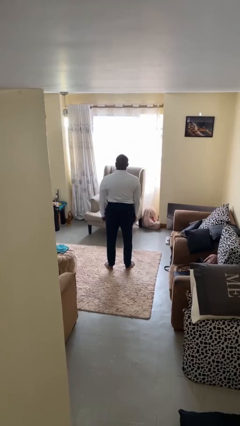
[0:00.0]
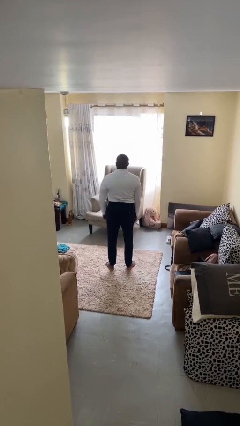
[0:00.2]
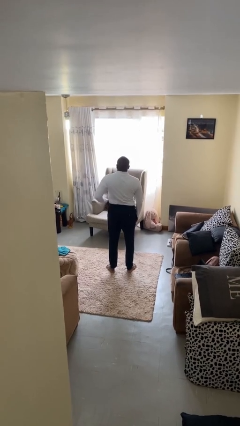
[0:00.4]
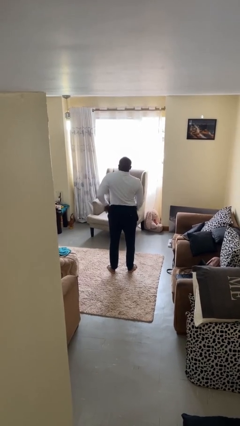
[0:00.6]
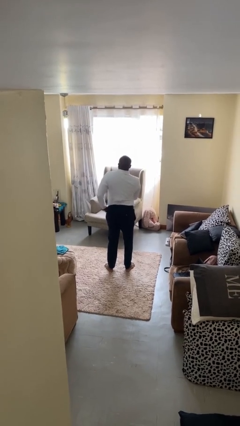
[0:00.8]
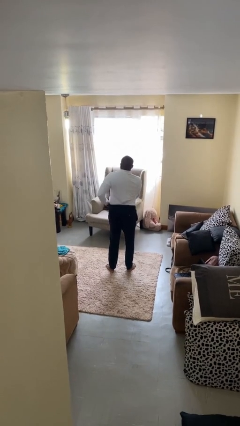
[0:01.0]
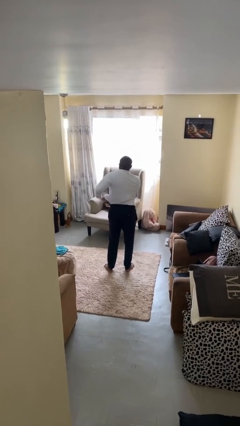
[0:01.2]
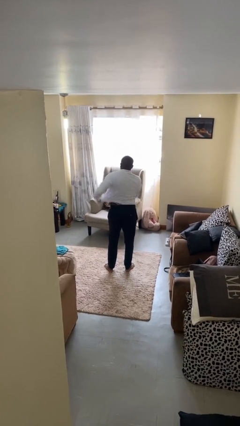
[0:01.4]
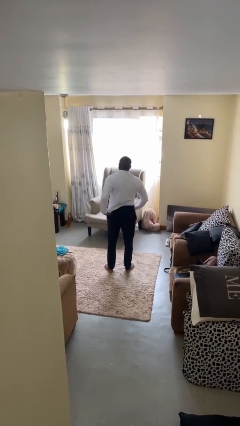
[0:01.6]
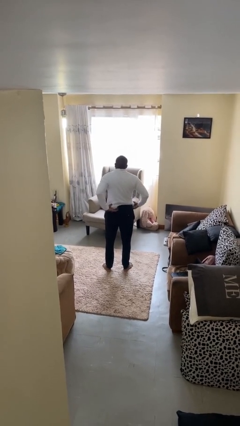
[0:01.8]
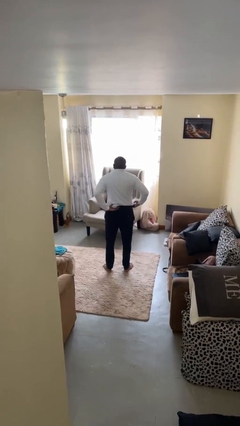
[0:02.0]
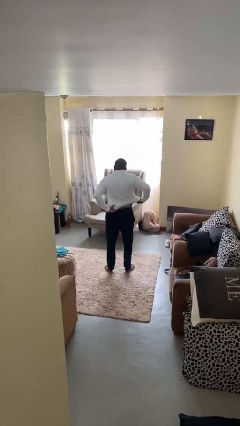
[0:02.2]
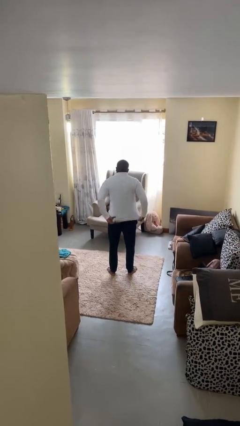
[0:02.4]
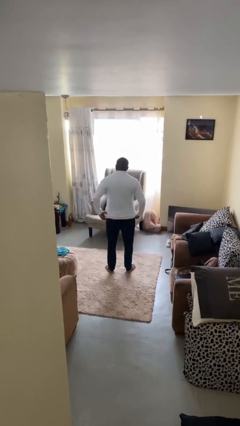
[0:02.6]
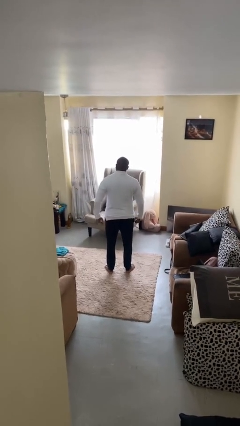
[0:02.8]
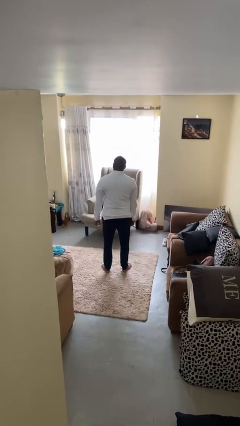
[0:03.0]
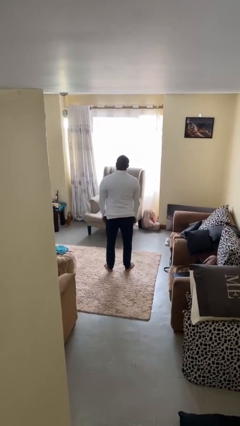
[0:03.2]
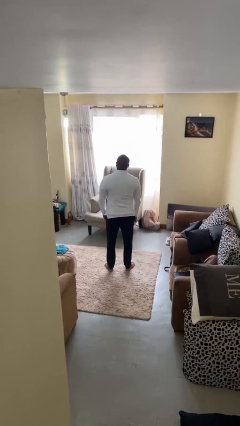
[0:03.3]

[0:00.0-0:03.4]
person untucks shirt

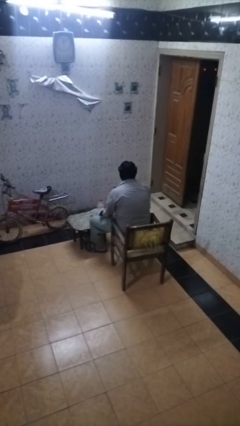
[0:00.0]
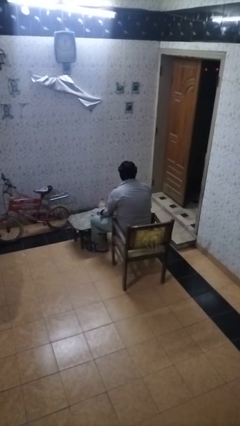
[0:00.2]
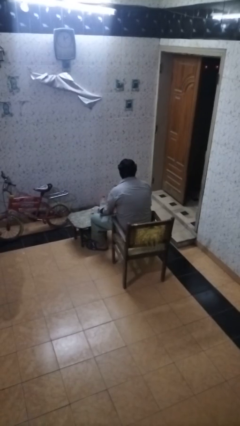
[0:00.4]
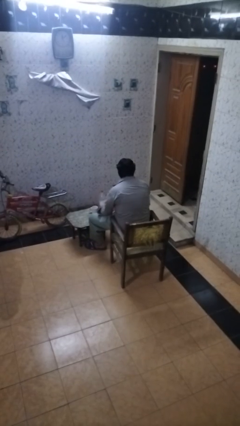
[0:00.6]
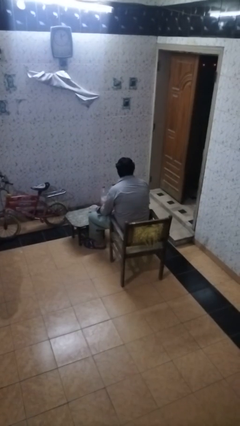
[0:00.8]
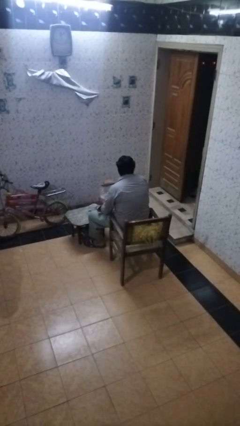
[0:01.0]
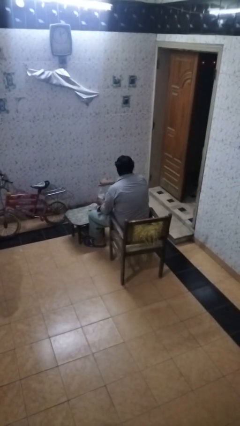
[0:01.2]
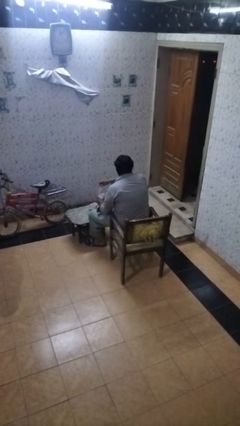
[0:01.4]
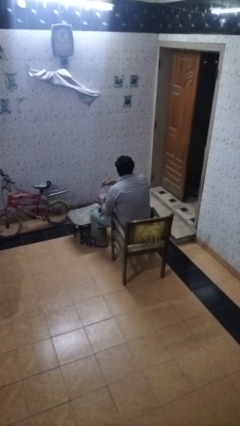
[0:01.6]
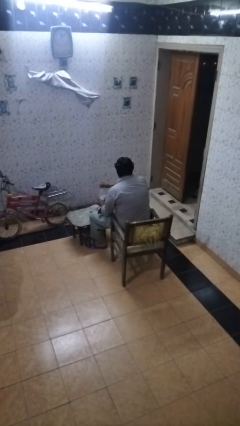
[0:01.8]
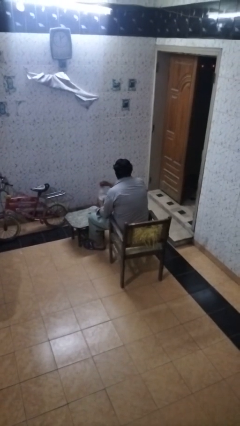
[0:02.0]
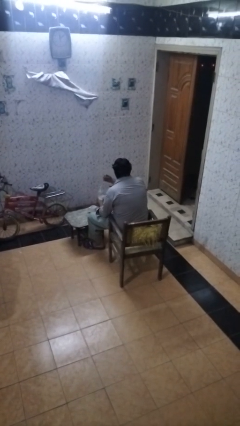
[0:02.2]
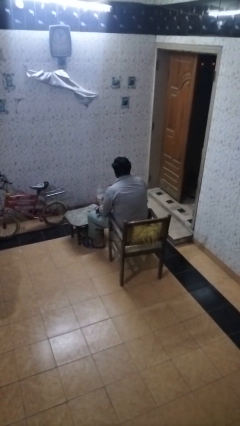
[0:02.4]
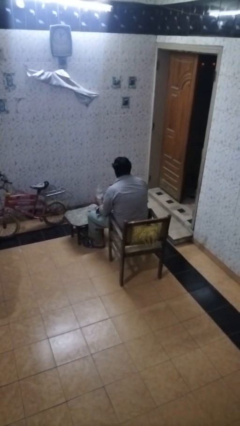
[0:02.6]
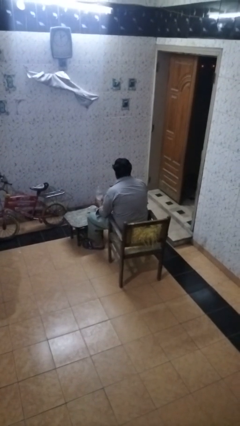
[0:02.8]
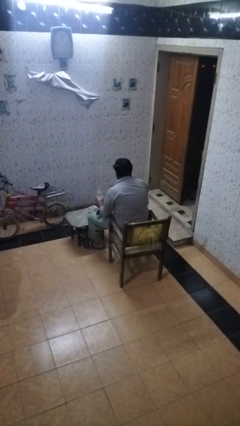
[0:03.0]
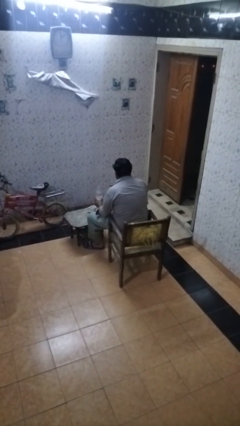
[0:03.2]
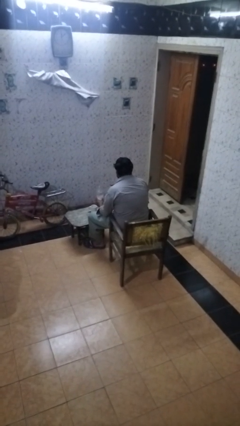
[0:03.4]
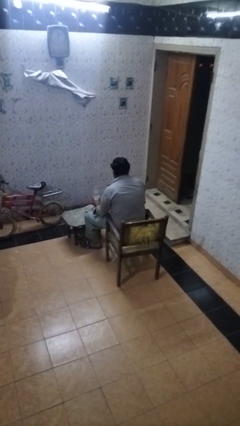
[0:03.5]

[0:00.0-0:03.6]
person unscrews lid from bottle

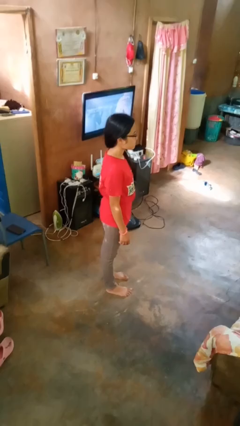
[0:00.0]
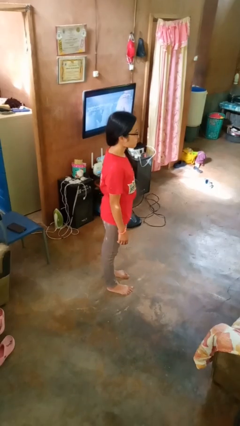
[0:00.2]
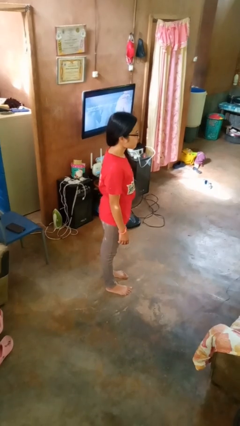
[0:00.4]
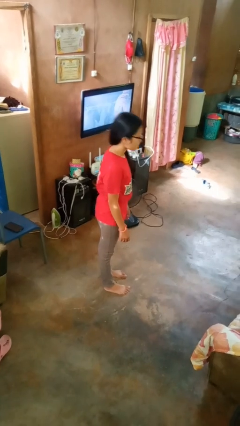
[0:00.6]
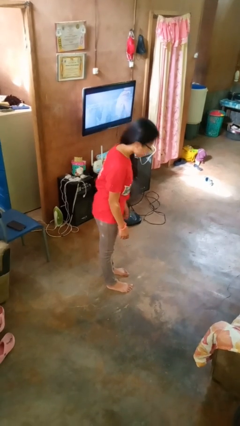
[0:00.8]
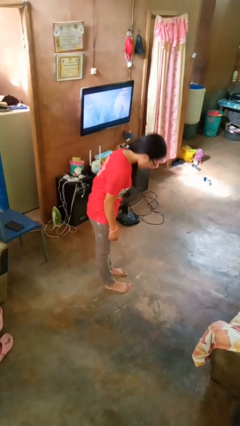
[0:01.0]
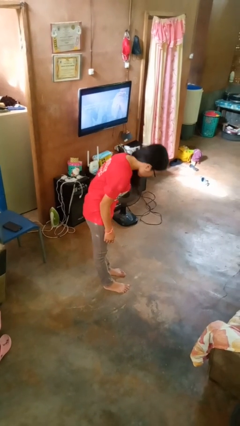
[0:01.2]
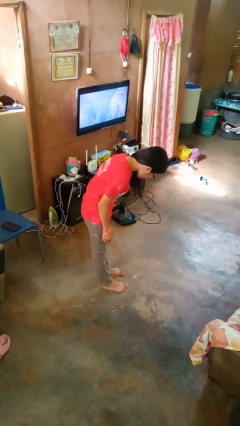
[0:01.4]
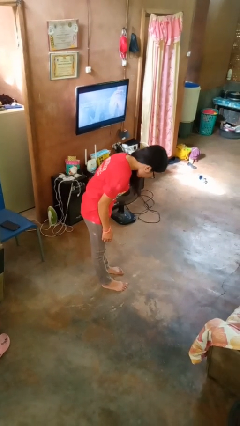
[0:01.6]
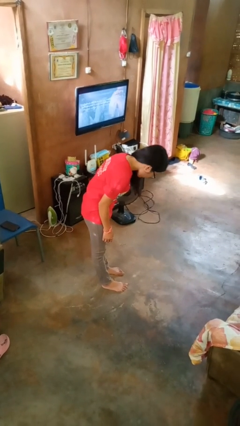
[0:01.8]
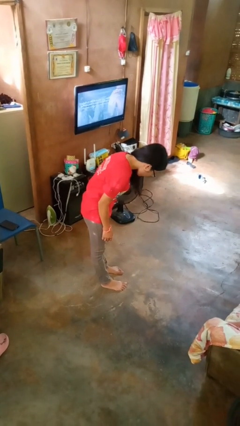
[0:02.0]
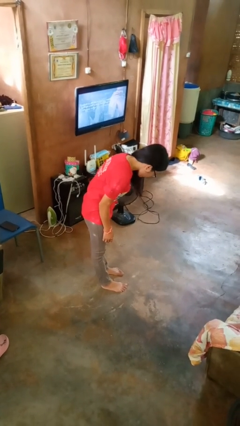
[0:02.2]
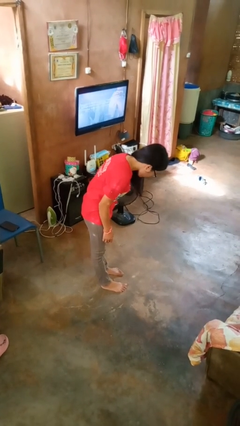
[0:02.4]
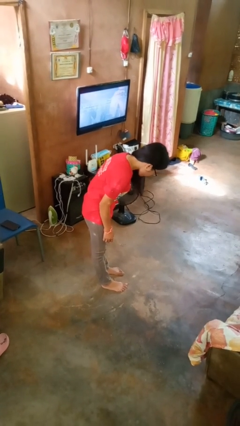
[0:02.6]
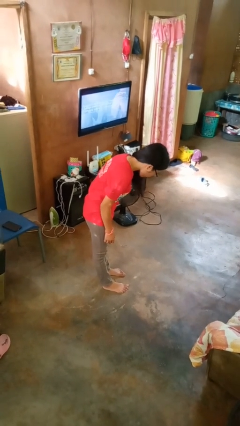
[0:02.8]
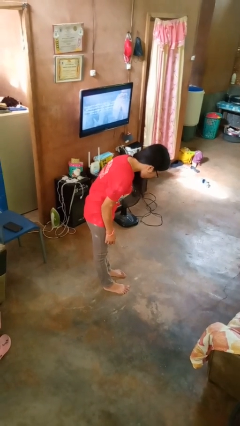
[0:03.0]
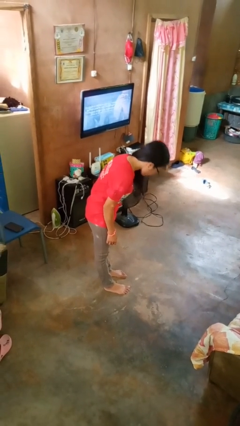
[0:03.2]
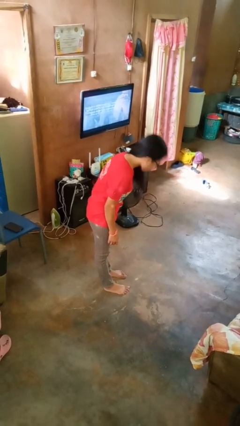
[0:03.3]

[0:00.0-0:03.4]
person bows

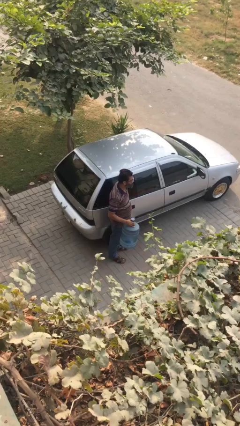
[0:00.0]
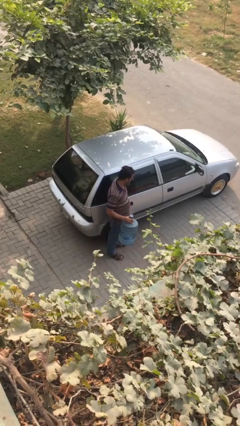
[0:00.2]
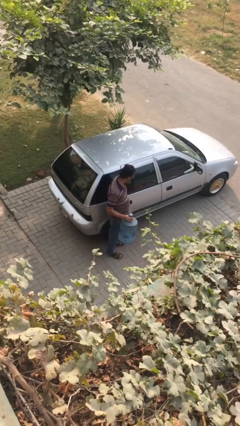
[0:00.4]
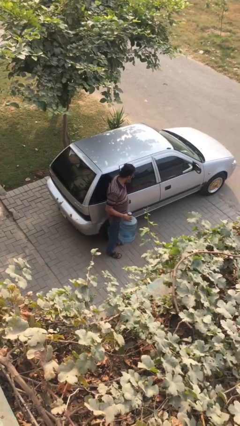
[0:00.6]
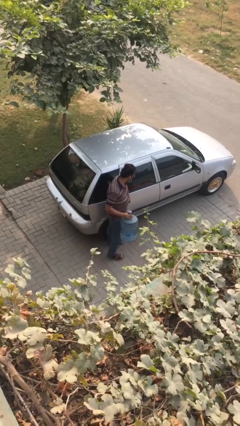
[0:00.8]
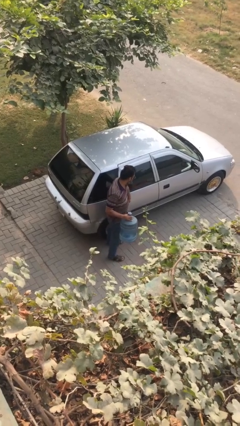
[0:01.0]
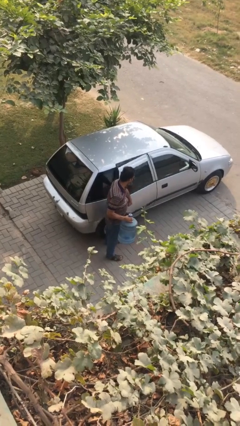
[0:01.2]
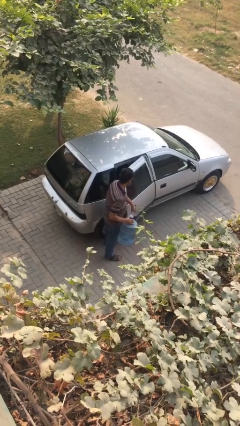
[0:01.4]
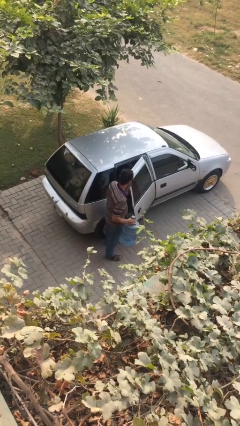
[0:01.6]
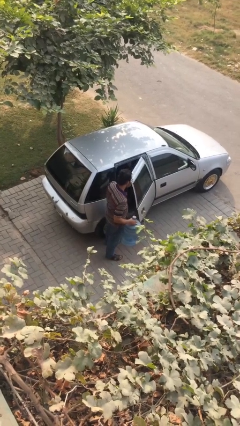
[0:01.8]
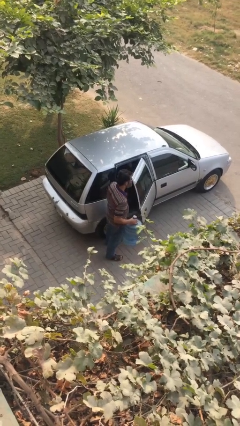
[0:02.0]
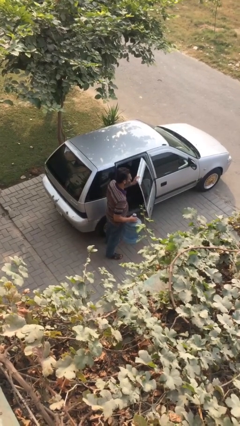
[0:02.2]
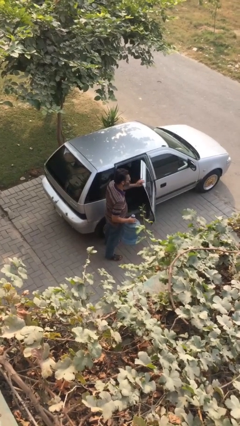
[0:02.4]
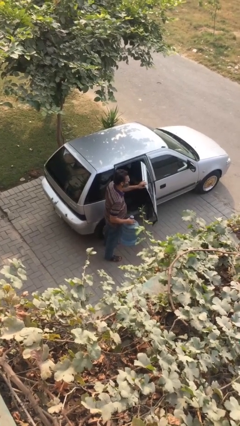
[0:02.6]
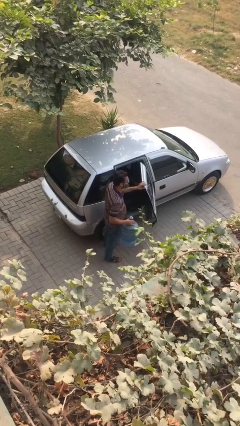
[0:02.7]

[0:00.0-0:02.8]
person opens car door

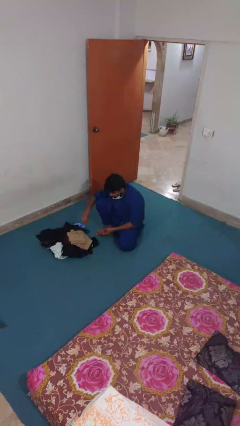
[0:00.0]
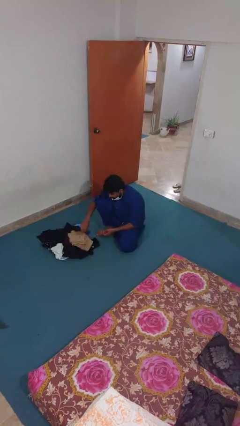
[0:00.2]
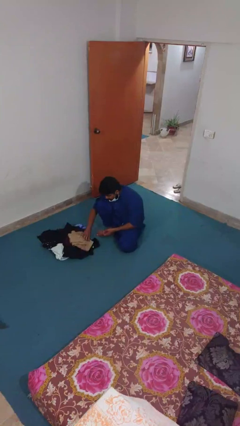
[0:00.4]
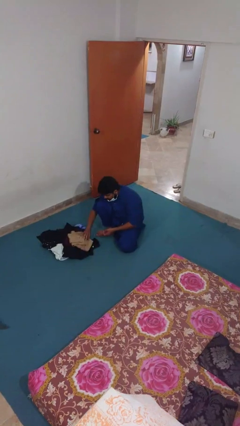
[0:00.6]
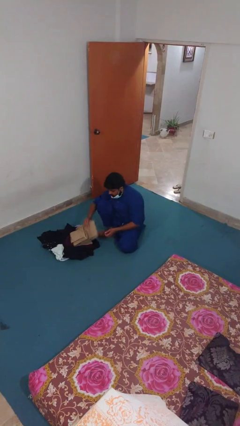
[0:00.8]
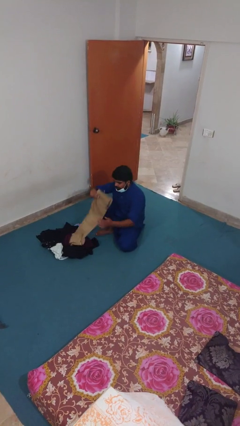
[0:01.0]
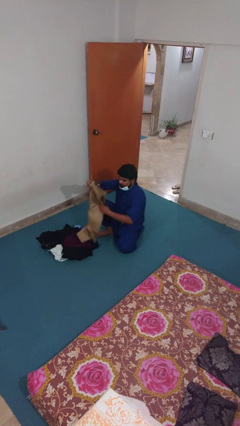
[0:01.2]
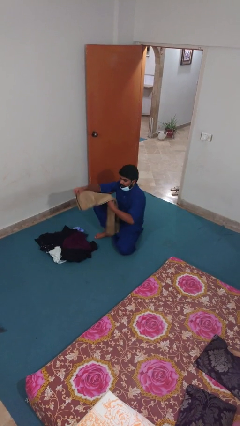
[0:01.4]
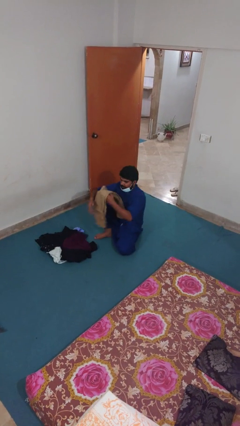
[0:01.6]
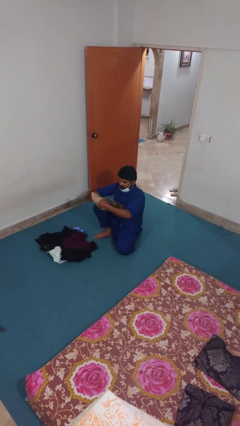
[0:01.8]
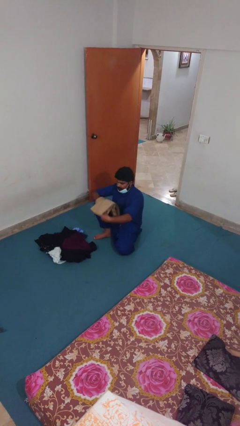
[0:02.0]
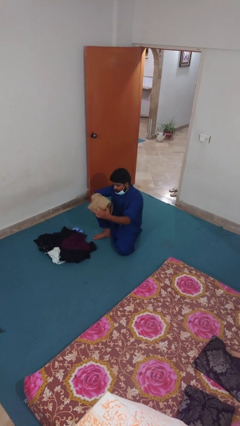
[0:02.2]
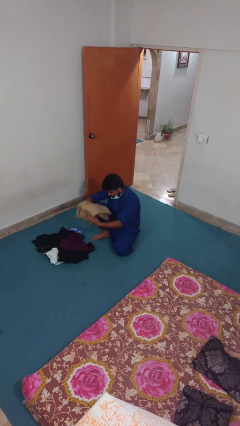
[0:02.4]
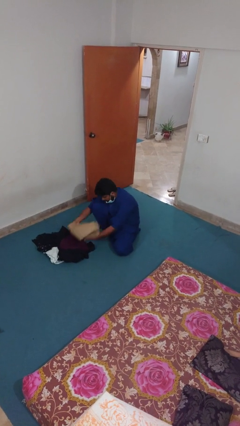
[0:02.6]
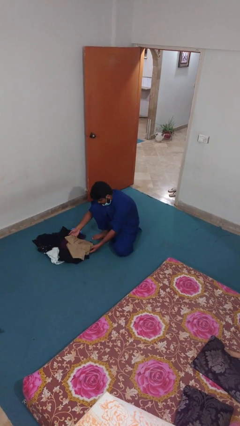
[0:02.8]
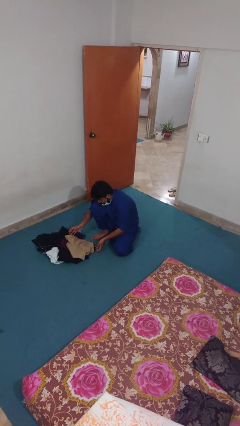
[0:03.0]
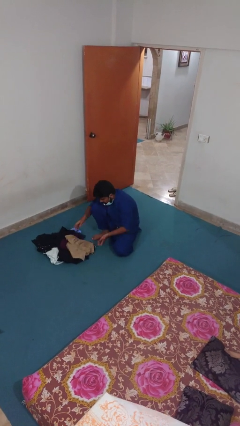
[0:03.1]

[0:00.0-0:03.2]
person folds pants

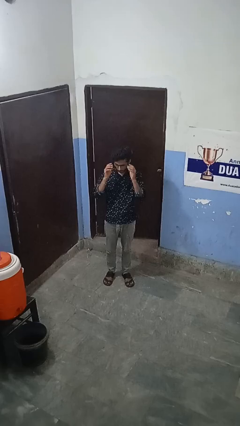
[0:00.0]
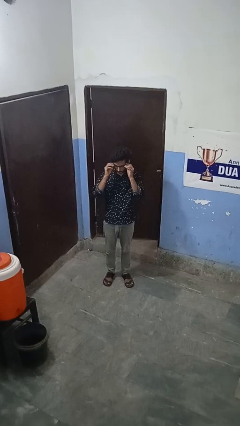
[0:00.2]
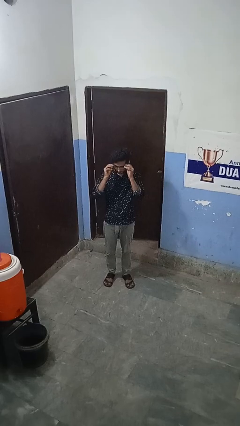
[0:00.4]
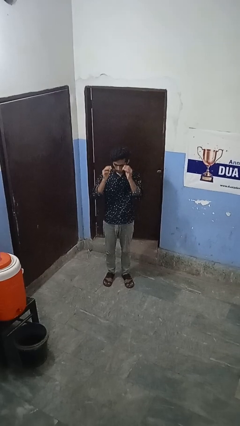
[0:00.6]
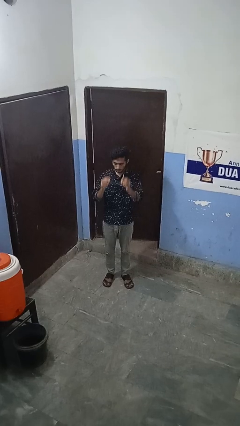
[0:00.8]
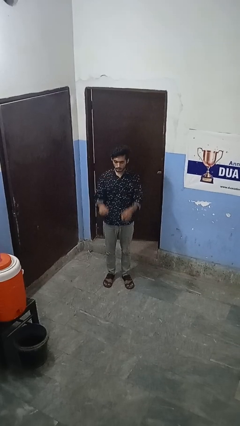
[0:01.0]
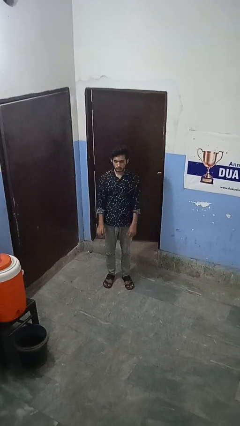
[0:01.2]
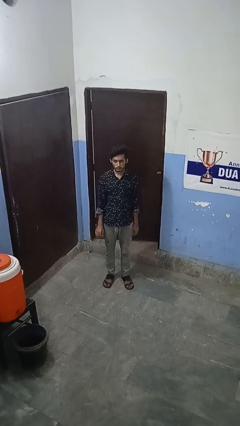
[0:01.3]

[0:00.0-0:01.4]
person takes off glasses
